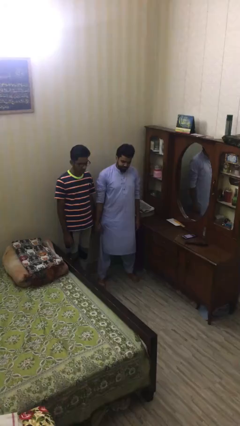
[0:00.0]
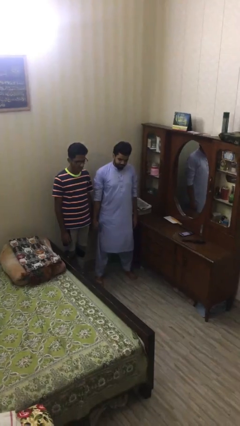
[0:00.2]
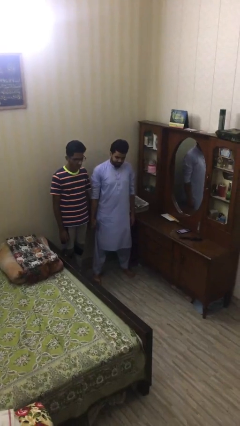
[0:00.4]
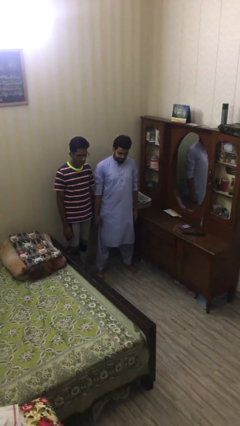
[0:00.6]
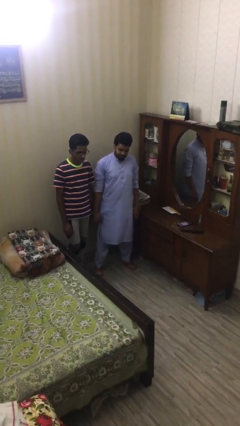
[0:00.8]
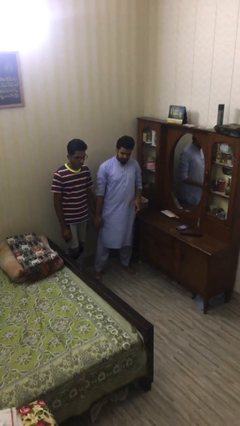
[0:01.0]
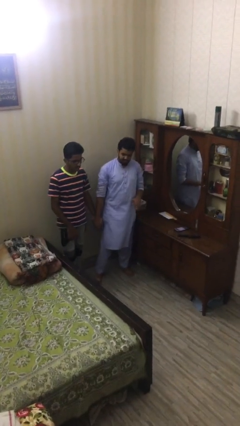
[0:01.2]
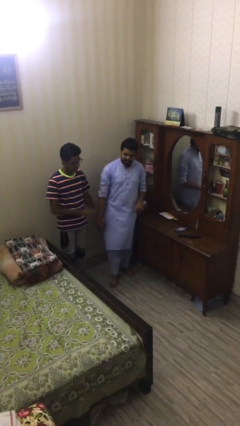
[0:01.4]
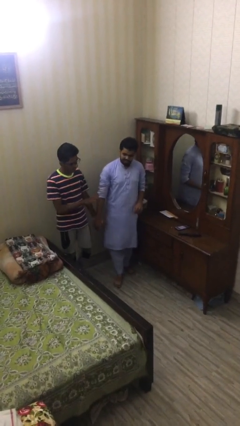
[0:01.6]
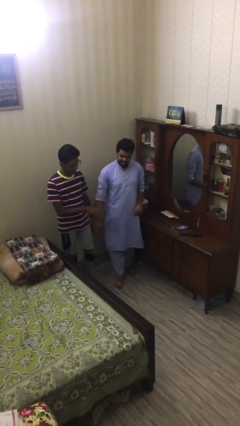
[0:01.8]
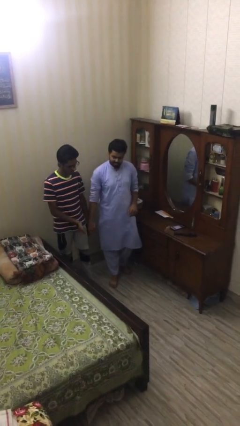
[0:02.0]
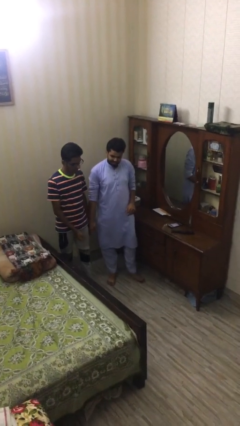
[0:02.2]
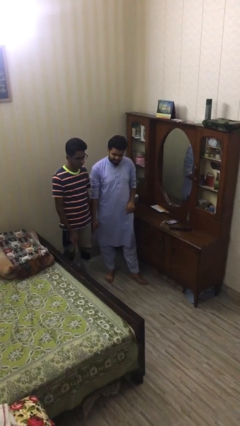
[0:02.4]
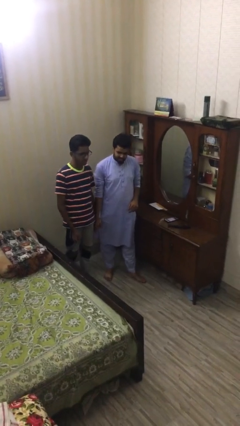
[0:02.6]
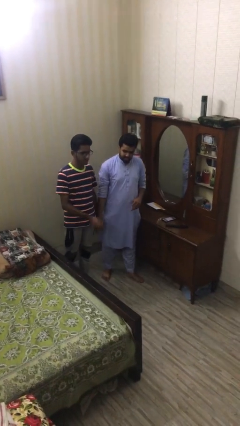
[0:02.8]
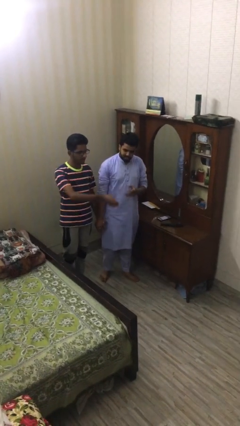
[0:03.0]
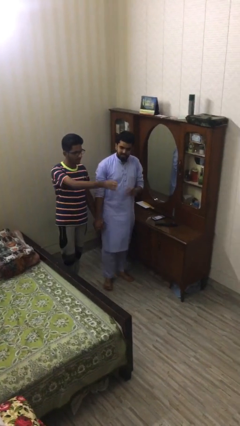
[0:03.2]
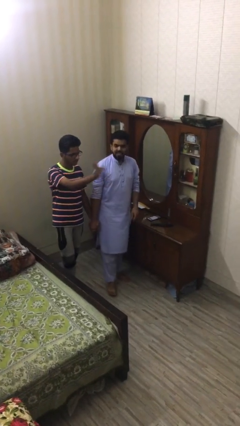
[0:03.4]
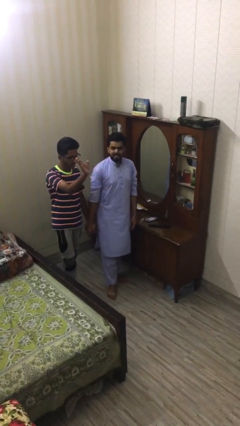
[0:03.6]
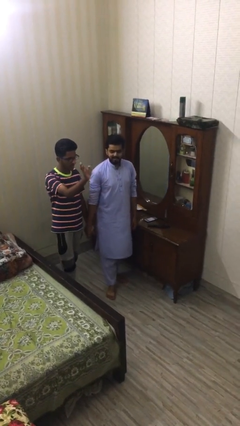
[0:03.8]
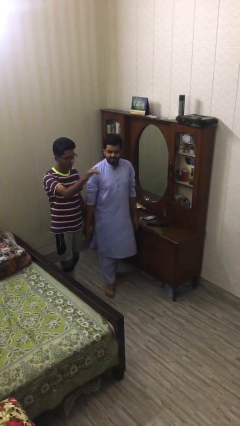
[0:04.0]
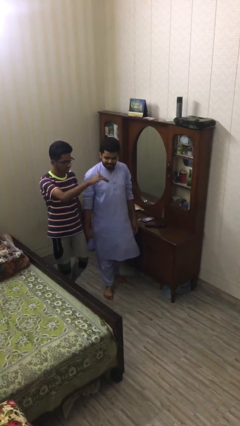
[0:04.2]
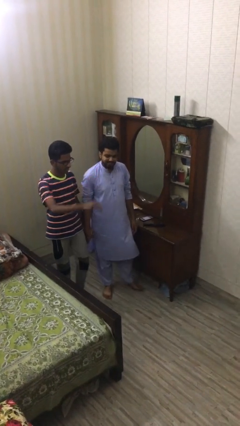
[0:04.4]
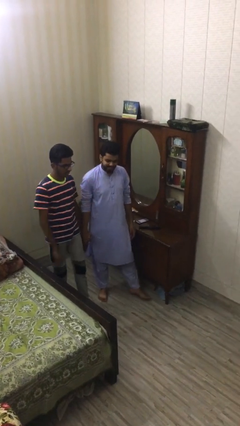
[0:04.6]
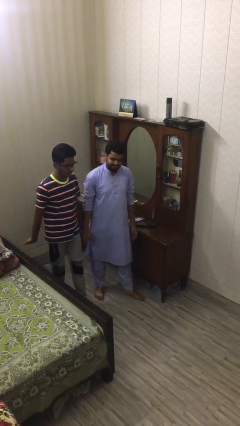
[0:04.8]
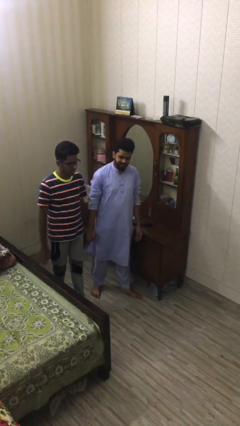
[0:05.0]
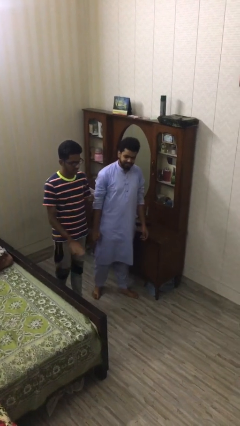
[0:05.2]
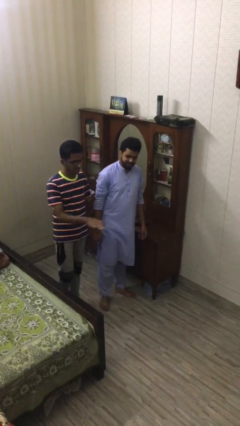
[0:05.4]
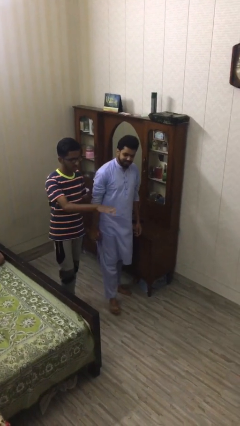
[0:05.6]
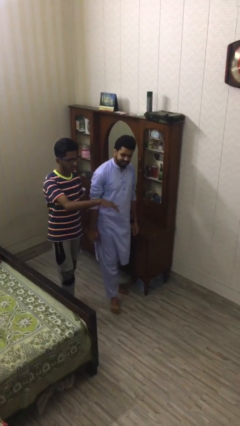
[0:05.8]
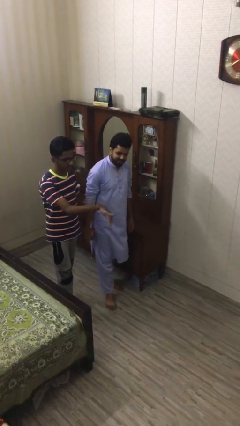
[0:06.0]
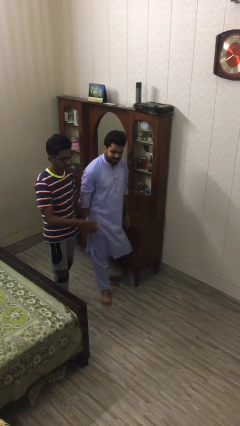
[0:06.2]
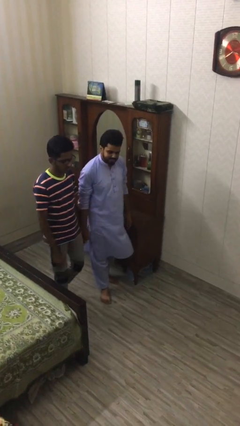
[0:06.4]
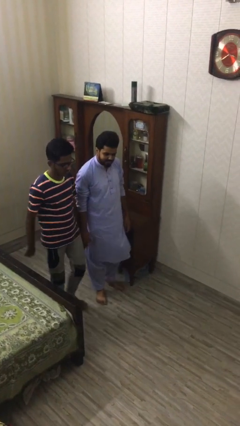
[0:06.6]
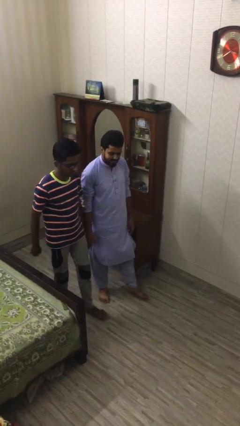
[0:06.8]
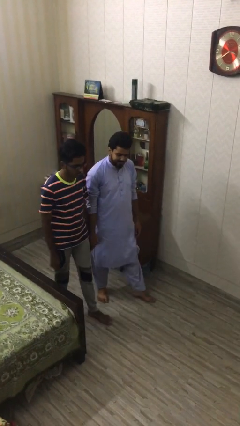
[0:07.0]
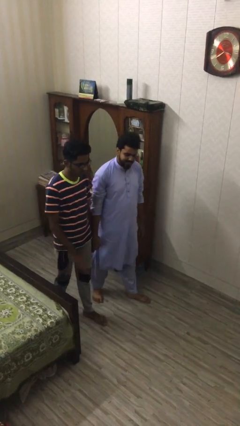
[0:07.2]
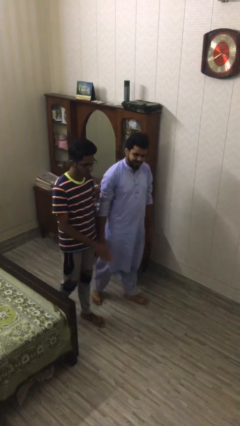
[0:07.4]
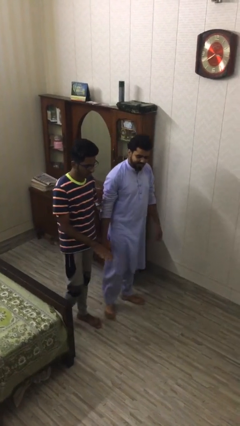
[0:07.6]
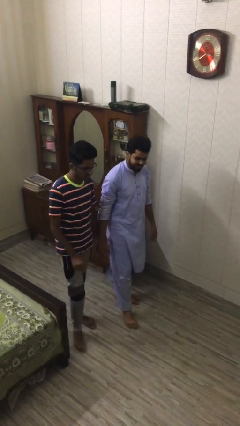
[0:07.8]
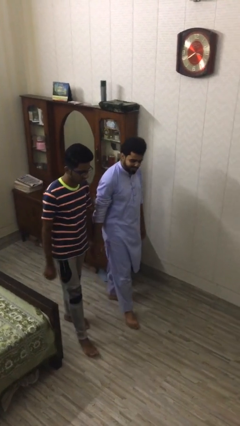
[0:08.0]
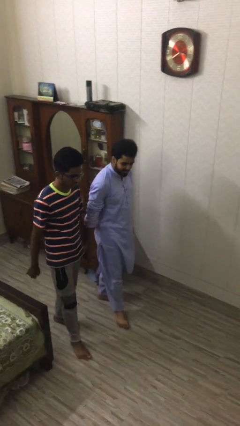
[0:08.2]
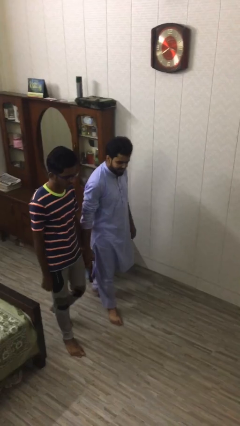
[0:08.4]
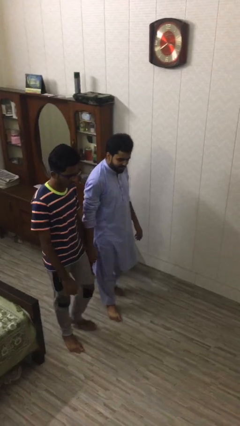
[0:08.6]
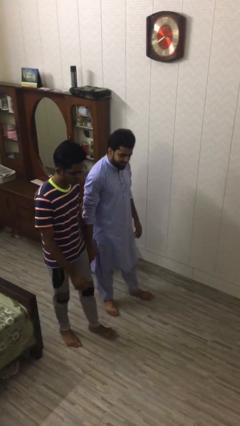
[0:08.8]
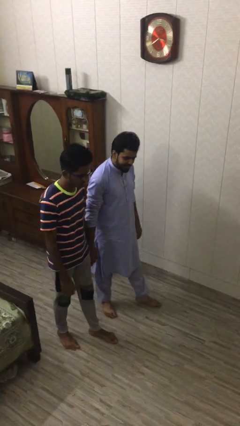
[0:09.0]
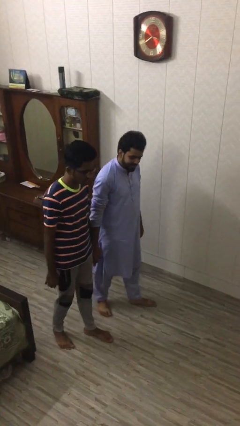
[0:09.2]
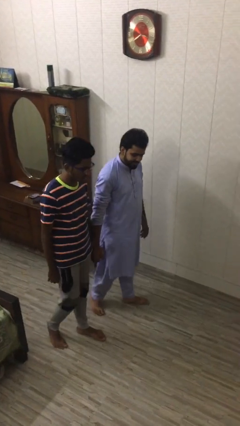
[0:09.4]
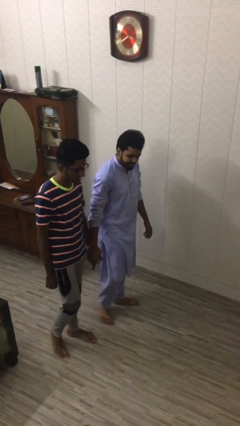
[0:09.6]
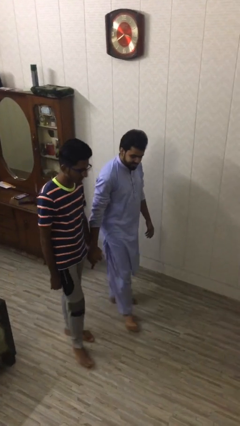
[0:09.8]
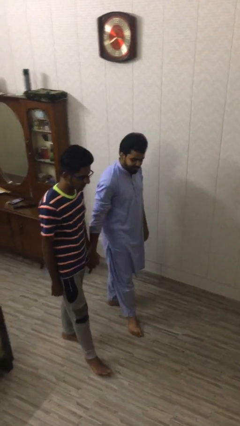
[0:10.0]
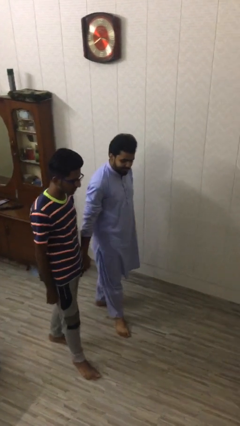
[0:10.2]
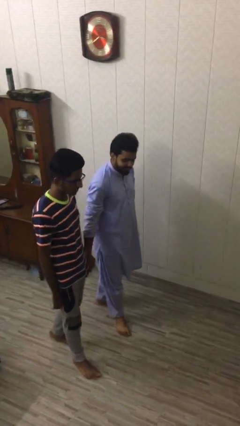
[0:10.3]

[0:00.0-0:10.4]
person holds hand

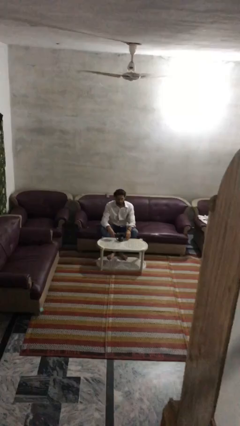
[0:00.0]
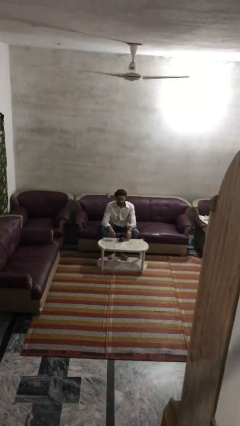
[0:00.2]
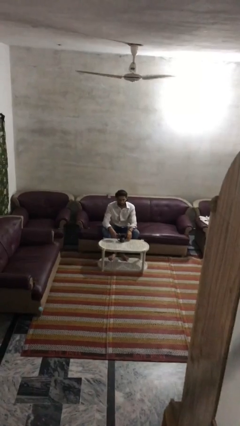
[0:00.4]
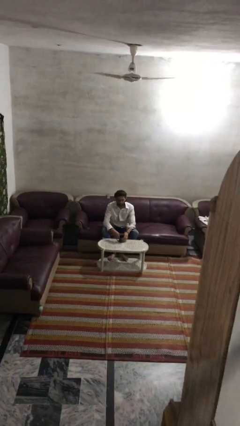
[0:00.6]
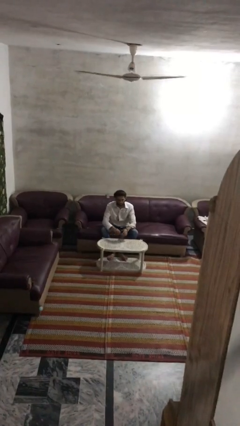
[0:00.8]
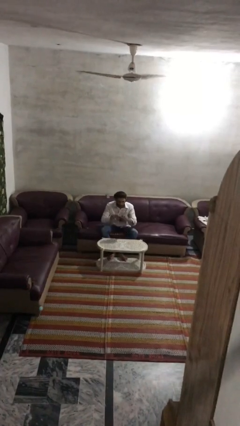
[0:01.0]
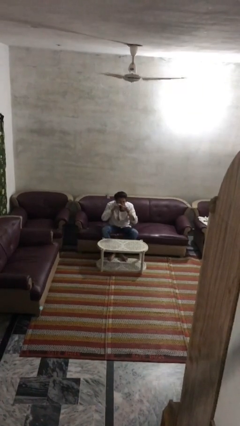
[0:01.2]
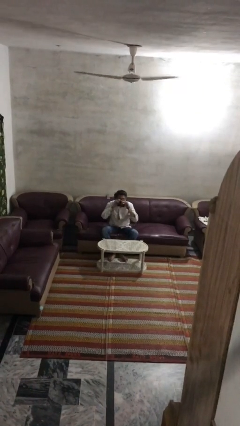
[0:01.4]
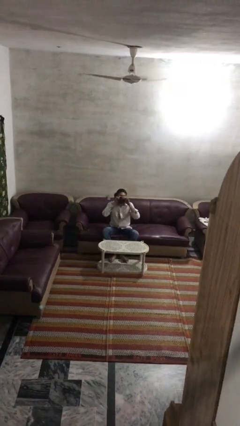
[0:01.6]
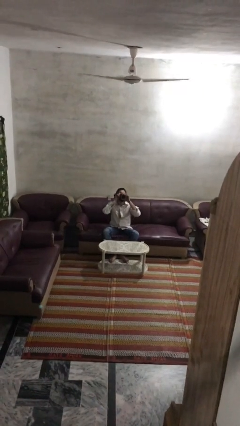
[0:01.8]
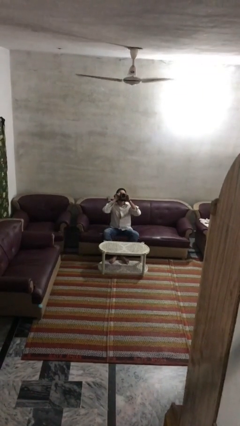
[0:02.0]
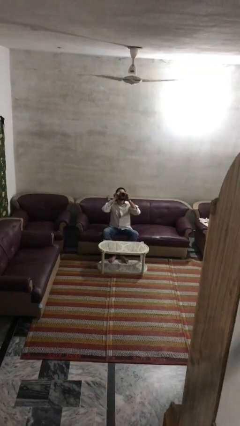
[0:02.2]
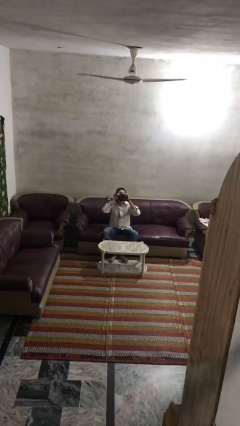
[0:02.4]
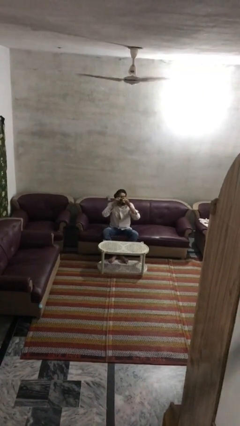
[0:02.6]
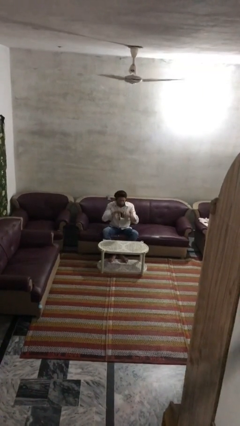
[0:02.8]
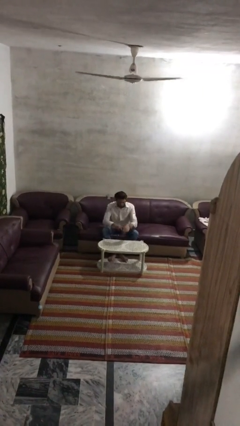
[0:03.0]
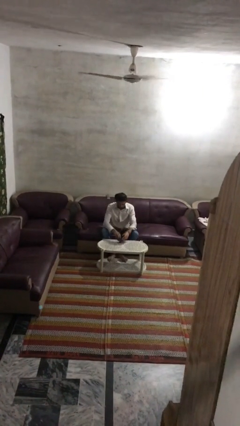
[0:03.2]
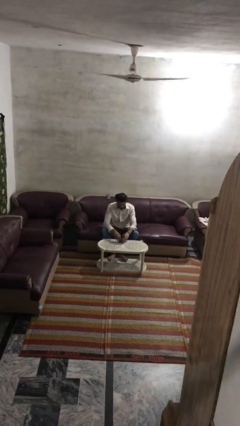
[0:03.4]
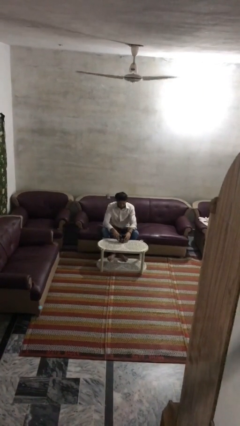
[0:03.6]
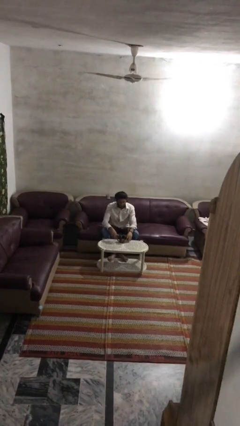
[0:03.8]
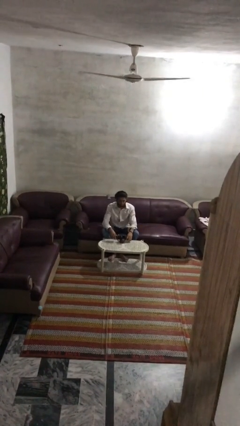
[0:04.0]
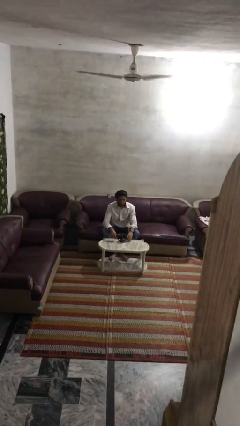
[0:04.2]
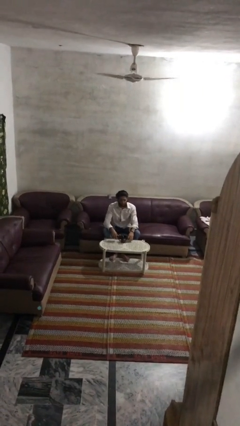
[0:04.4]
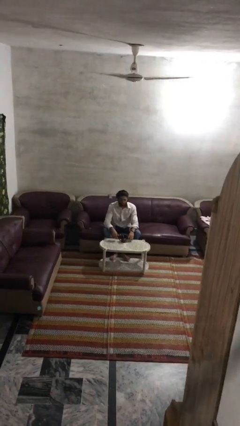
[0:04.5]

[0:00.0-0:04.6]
person drinks from mug

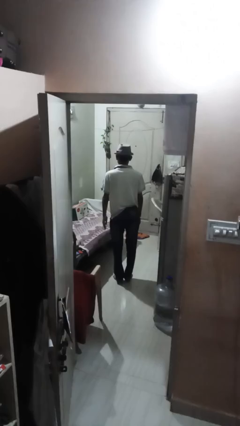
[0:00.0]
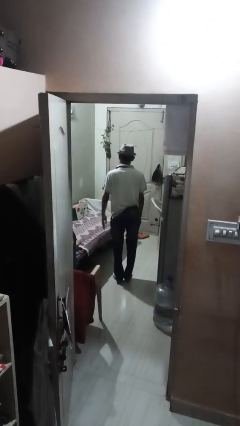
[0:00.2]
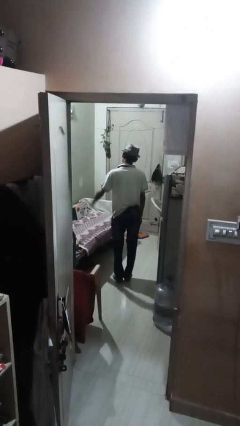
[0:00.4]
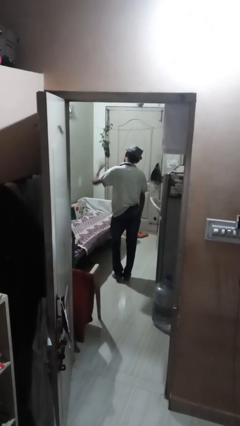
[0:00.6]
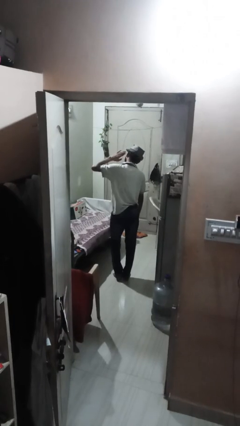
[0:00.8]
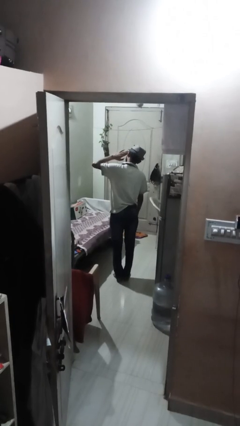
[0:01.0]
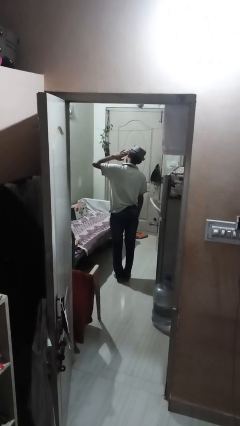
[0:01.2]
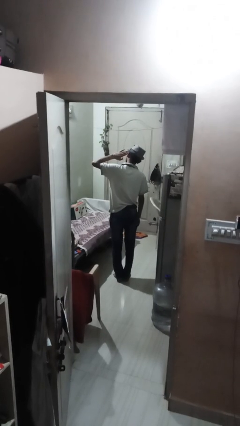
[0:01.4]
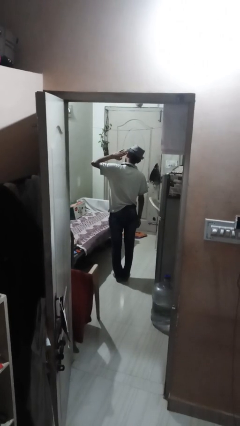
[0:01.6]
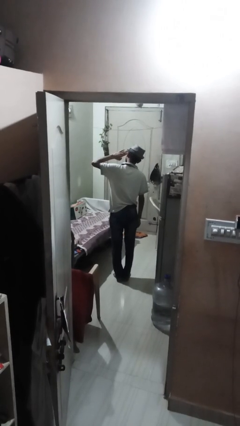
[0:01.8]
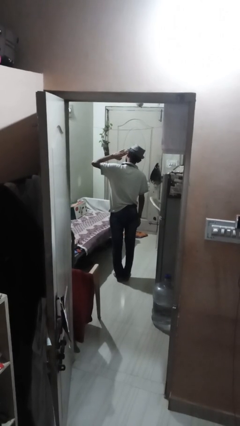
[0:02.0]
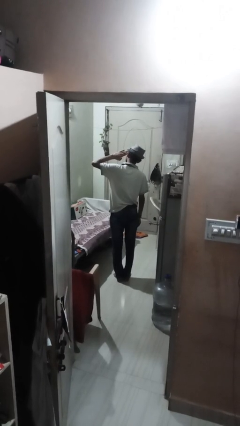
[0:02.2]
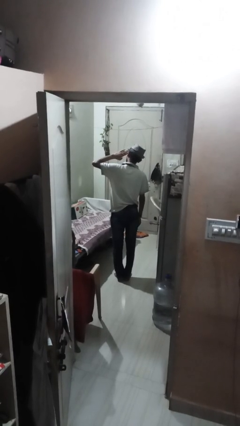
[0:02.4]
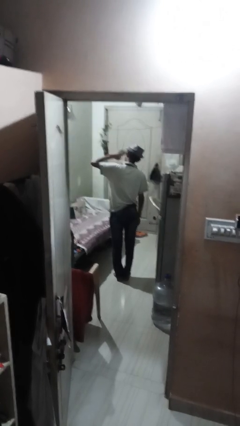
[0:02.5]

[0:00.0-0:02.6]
person salutes

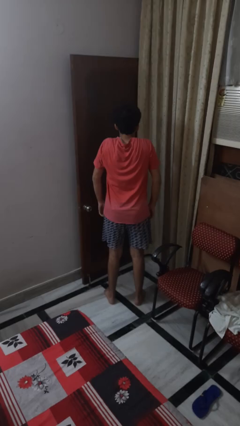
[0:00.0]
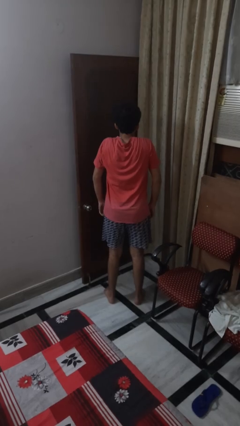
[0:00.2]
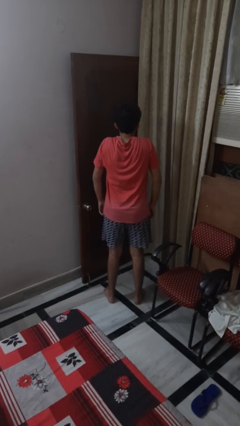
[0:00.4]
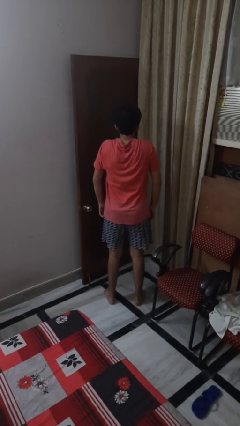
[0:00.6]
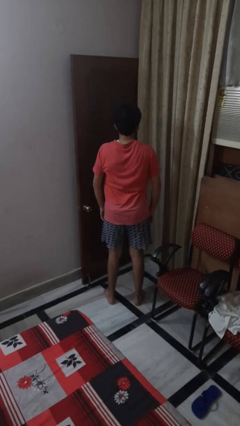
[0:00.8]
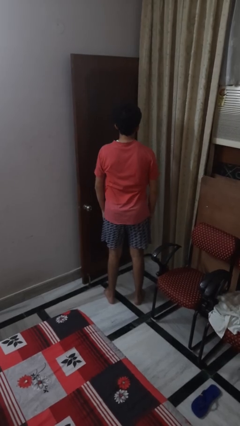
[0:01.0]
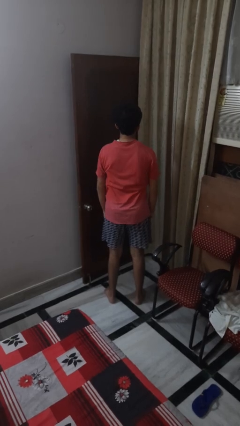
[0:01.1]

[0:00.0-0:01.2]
person shrugs
